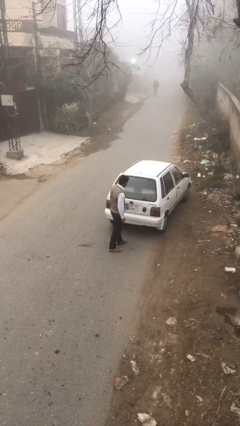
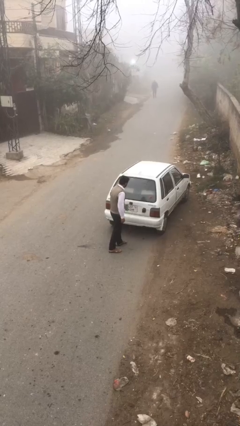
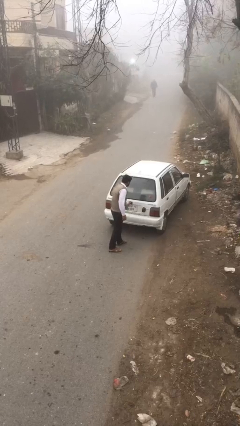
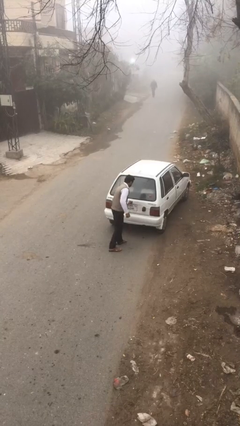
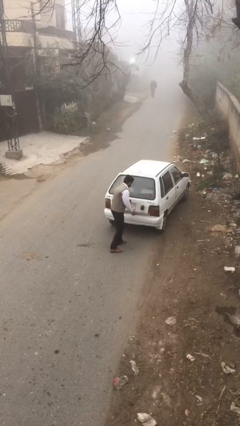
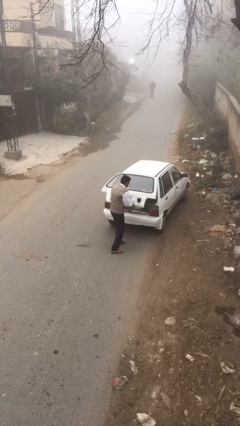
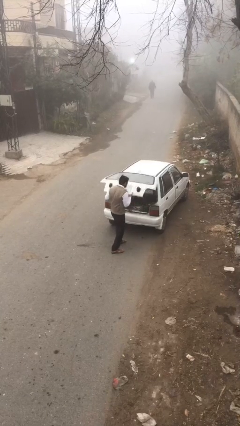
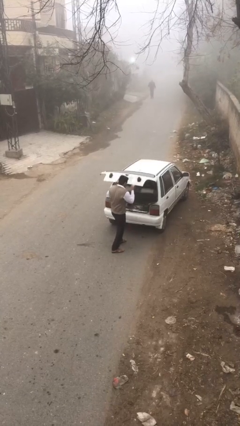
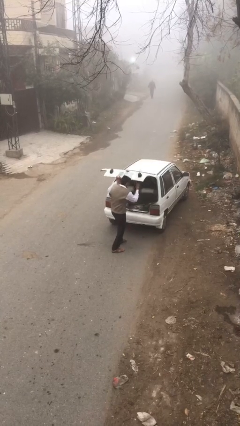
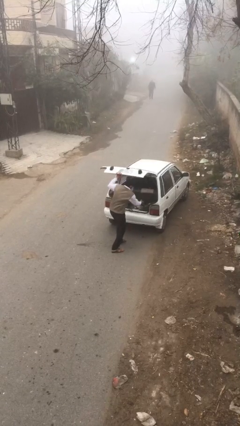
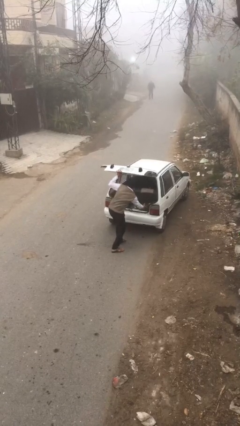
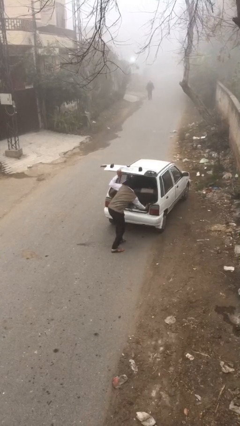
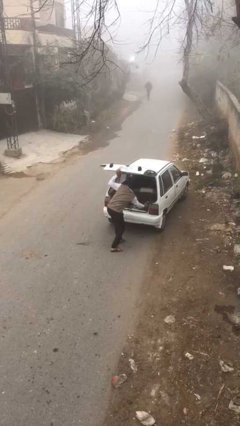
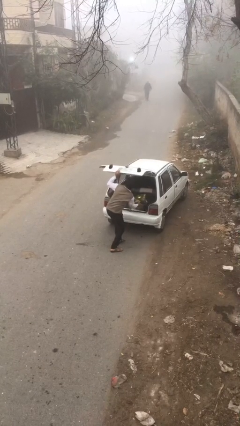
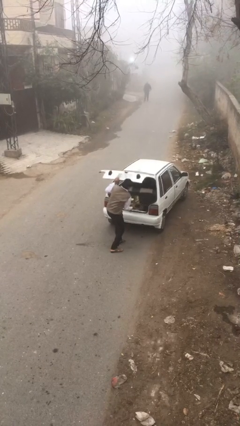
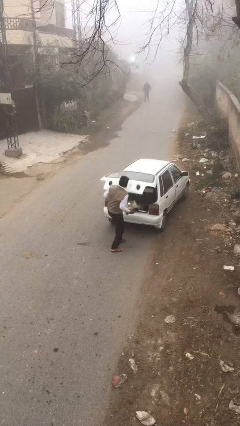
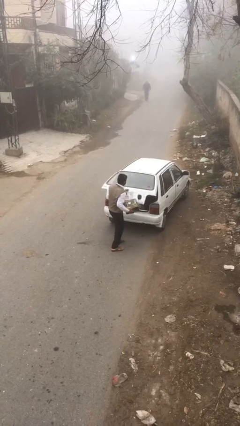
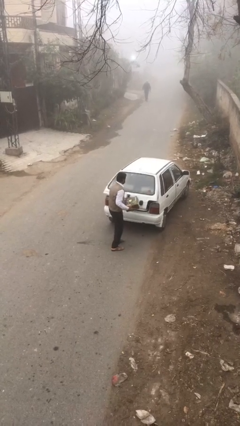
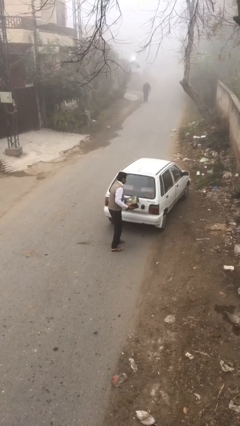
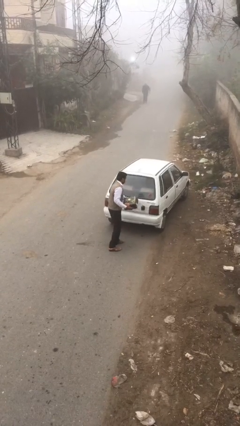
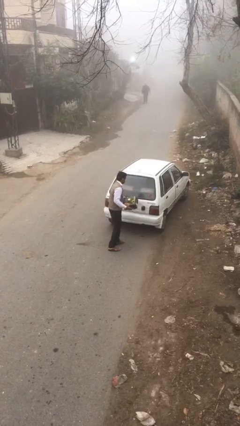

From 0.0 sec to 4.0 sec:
person unloads car

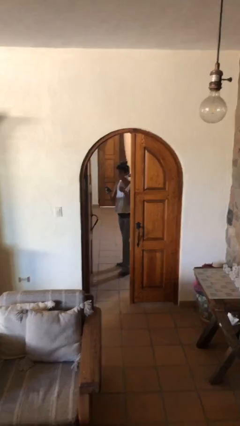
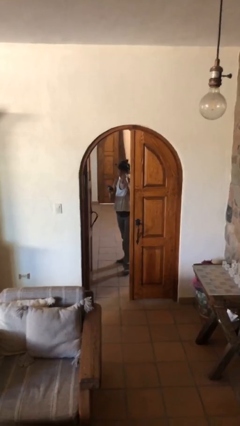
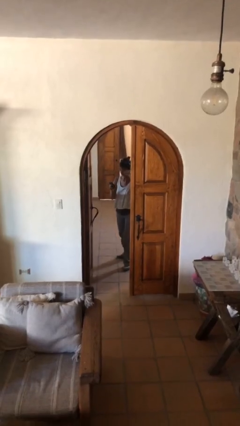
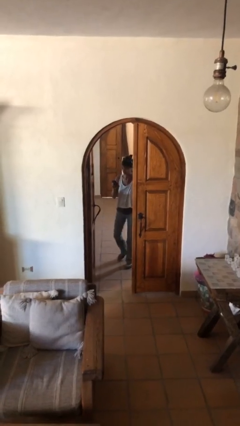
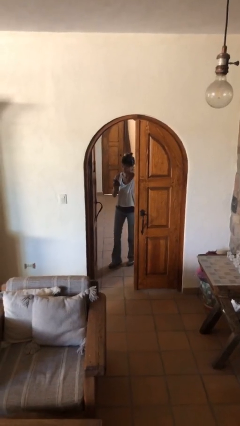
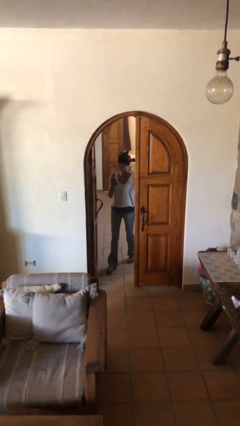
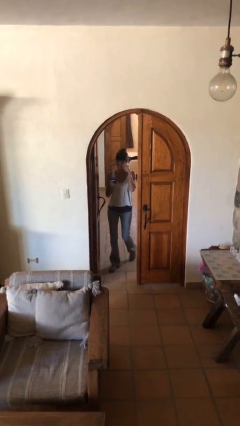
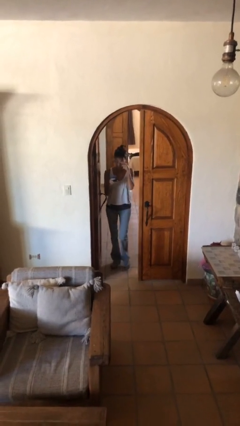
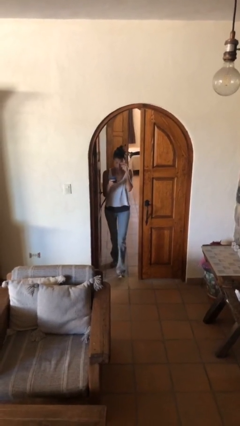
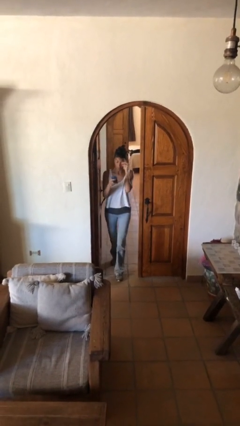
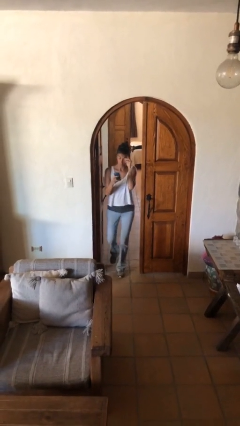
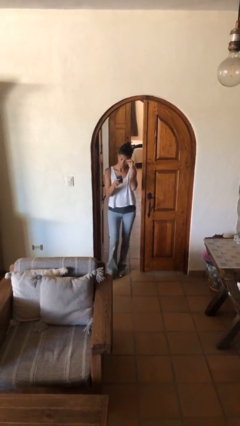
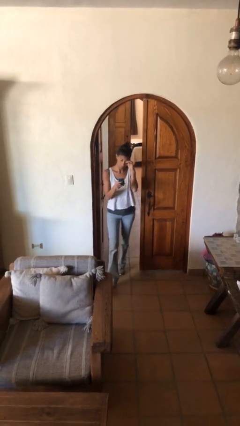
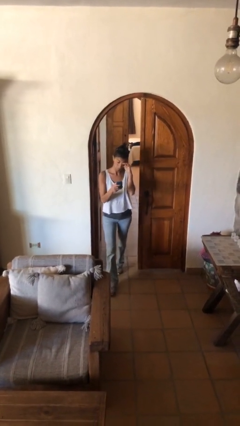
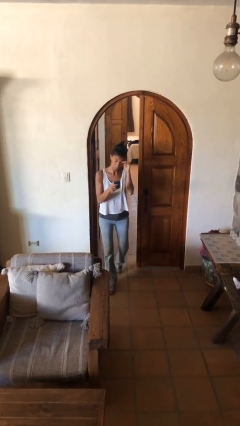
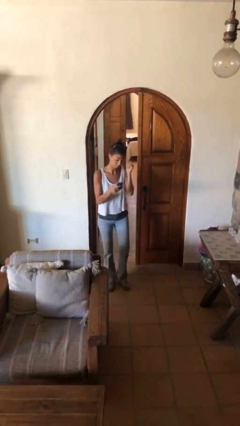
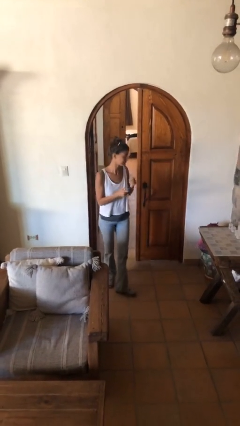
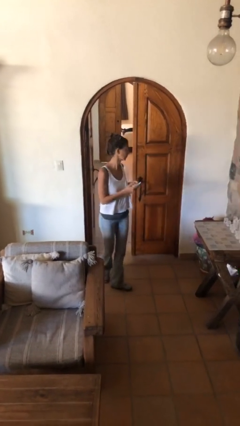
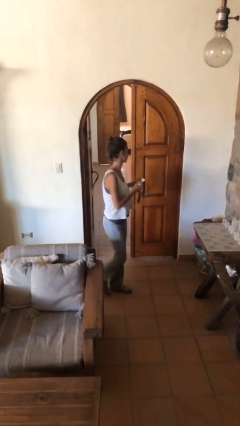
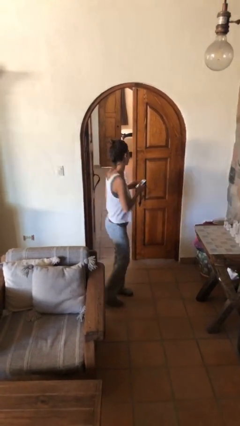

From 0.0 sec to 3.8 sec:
person enters scene through structure

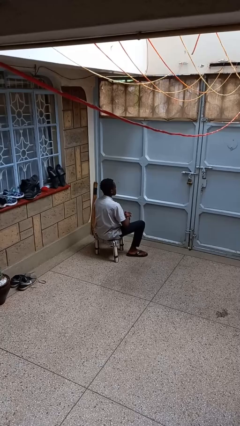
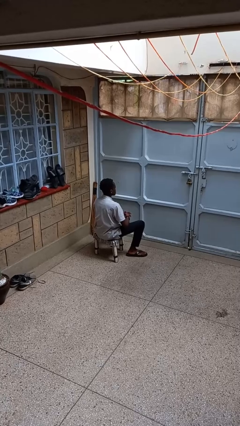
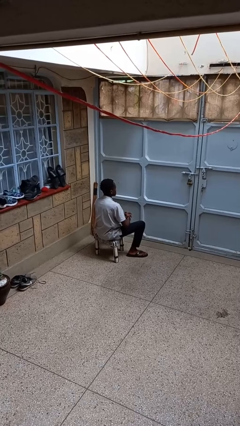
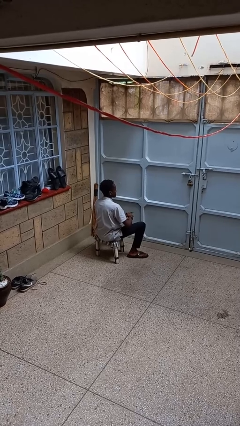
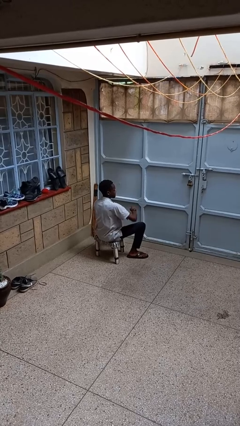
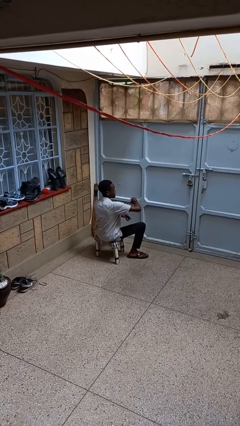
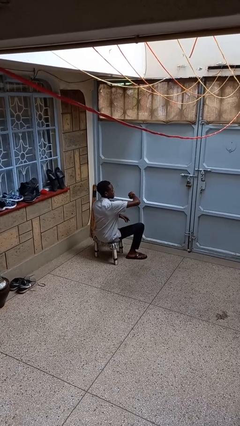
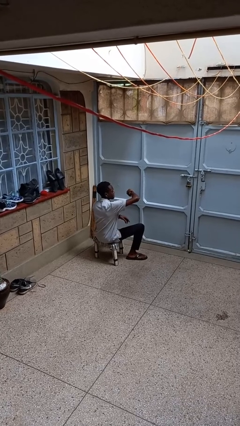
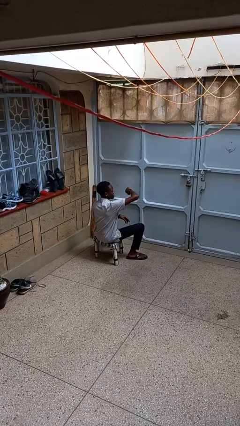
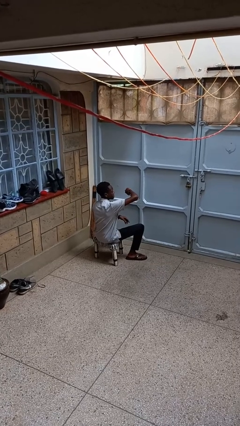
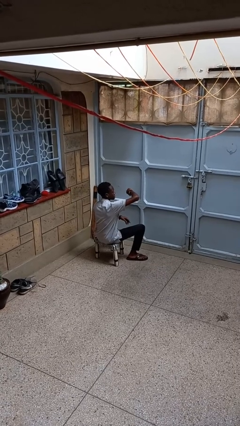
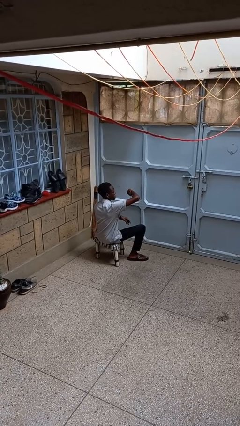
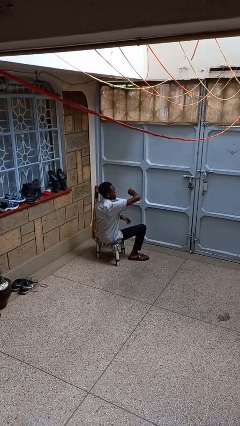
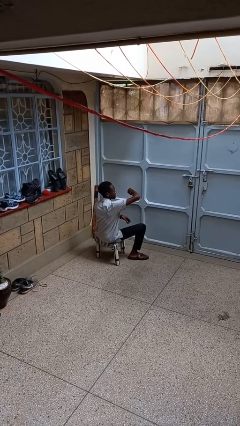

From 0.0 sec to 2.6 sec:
person looks at wristwatch

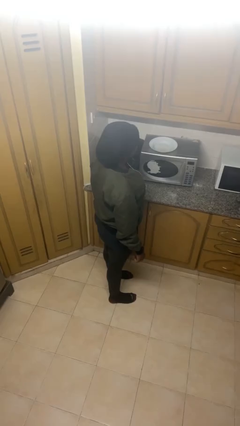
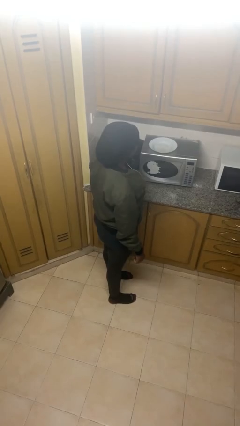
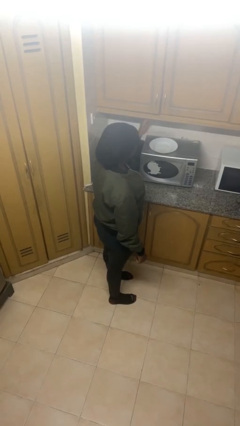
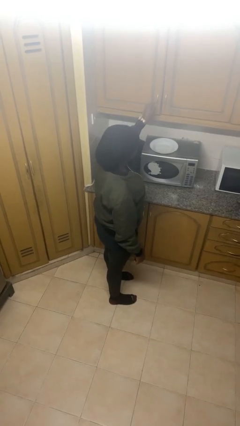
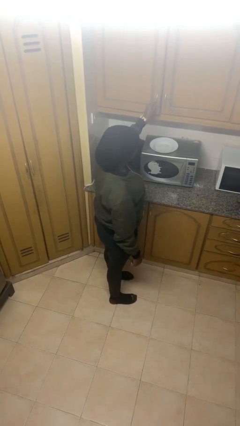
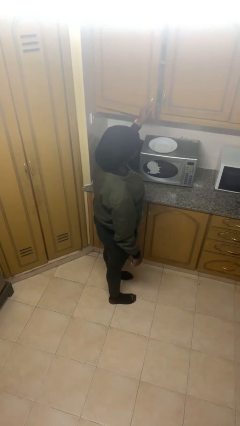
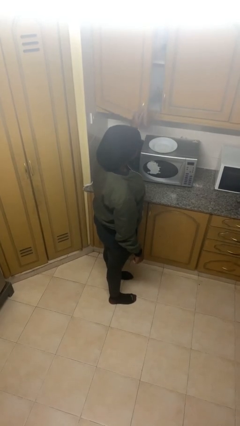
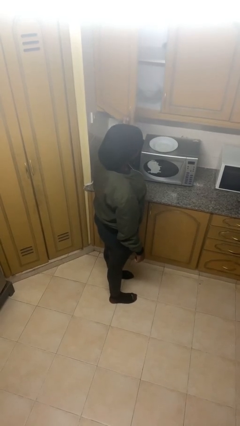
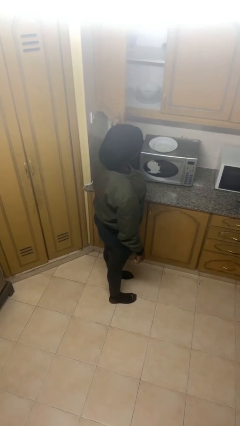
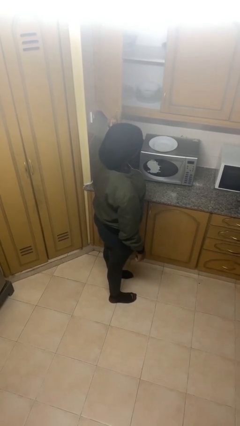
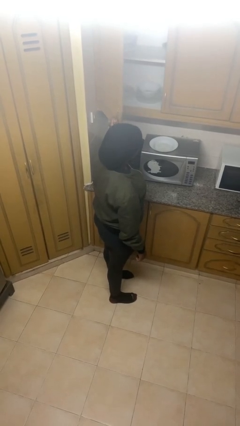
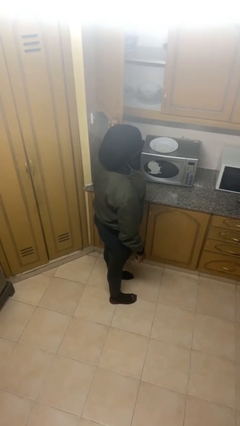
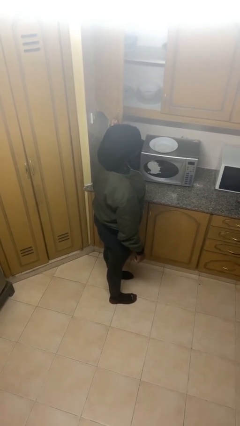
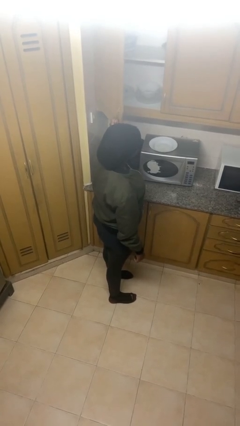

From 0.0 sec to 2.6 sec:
person opens cabinet

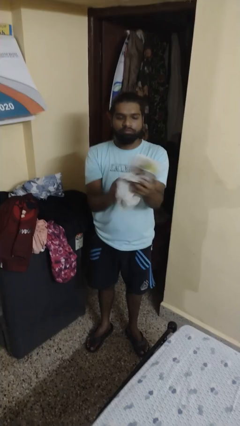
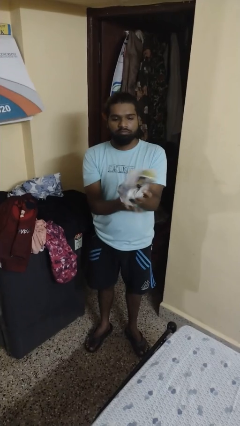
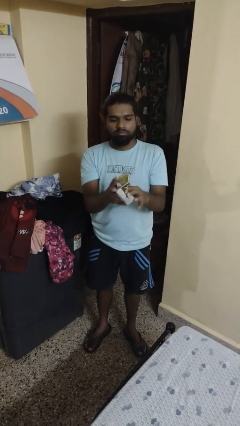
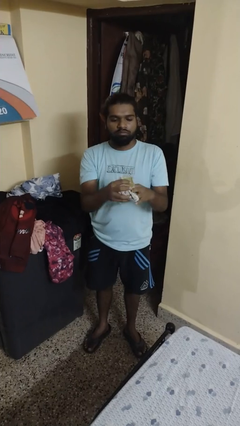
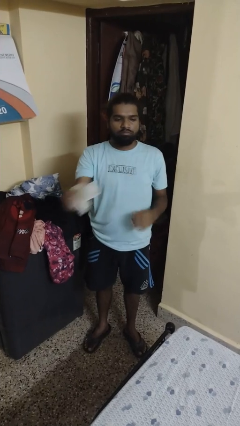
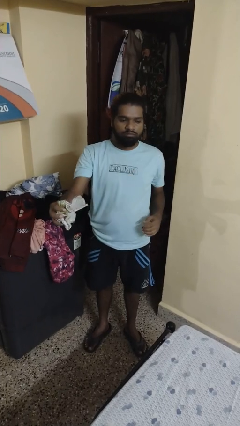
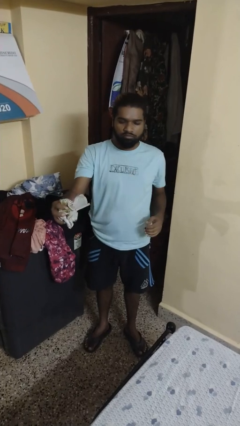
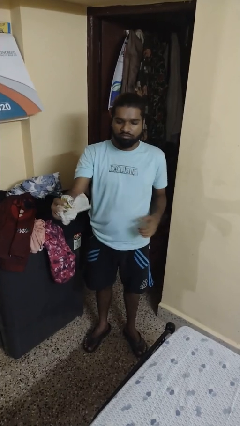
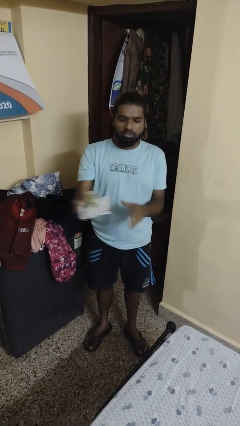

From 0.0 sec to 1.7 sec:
person crumples paper

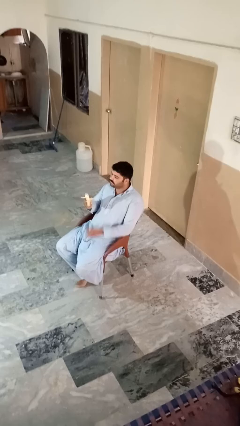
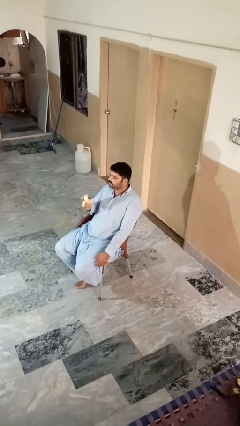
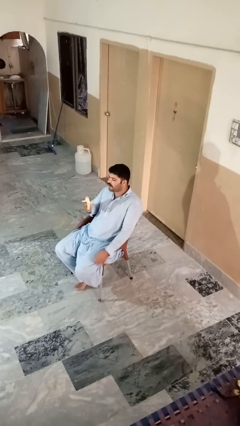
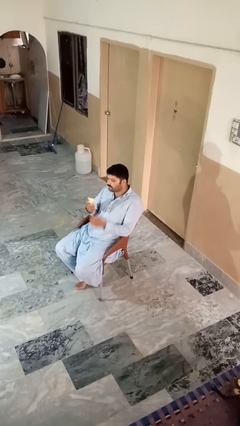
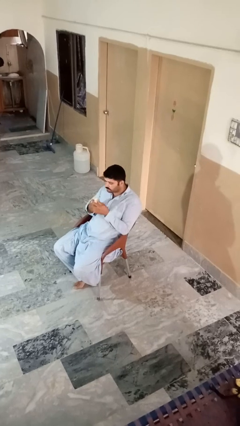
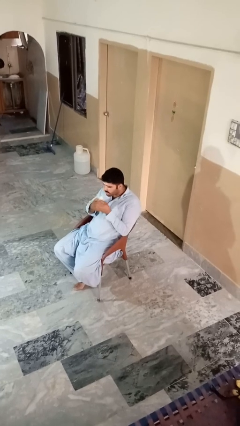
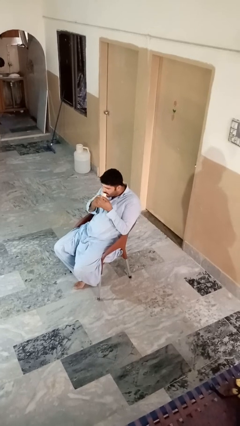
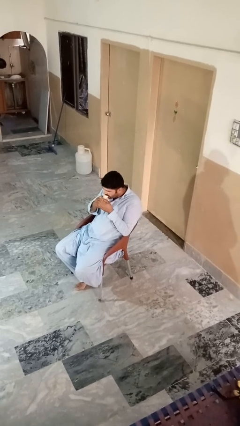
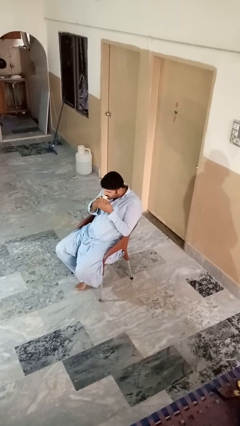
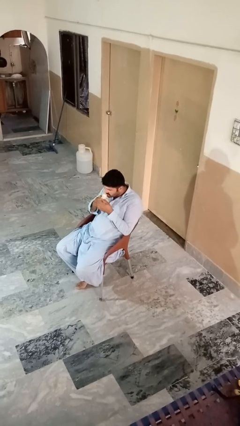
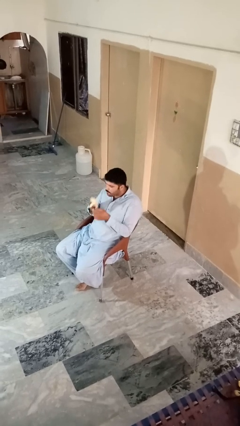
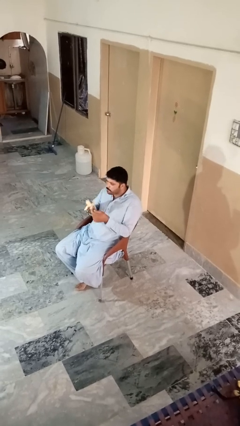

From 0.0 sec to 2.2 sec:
person eats banana

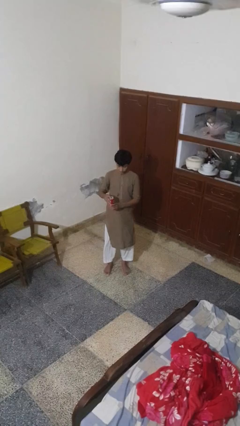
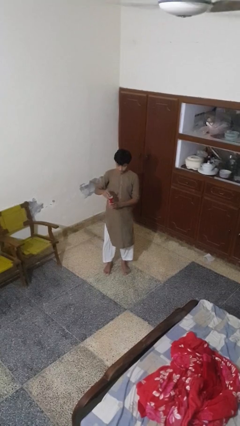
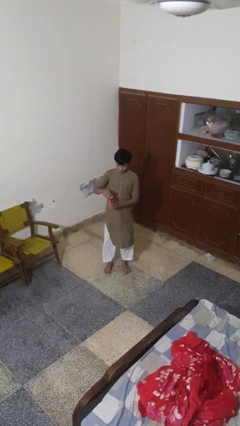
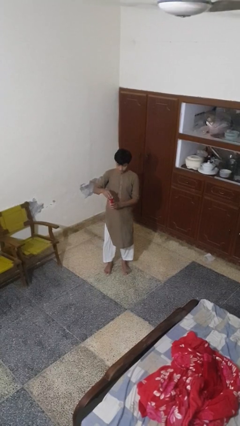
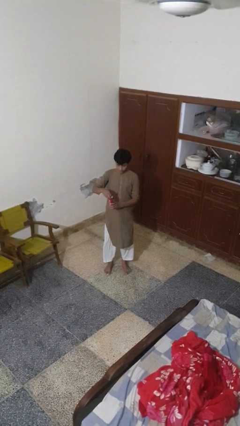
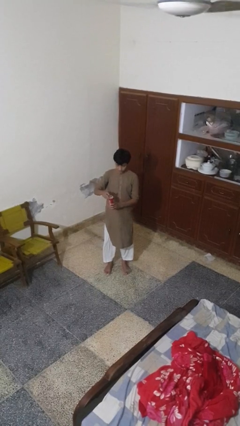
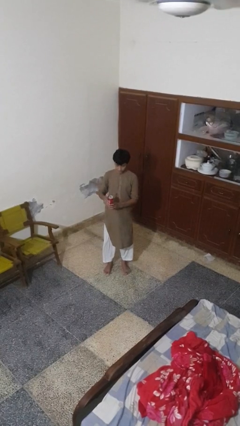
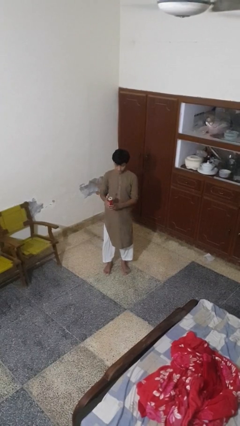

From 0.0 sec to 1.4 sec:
person opens beverage can
